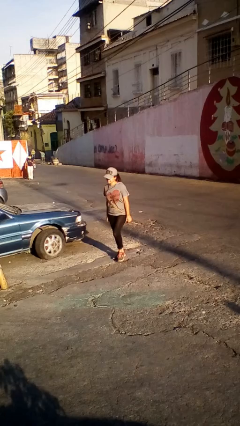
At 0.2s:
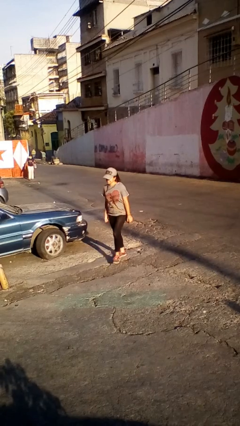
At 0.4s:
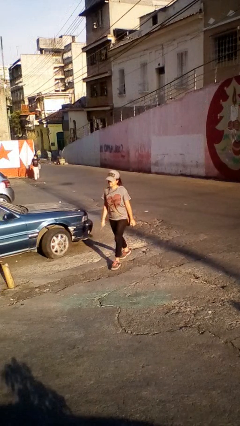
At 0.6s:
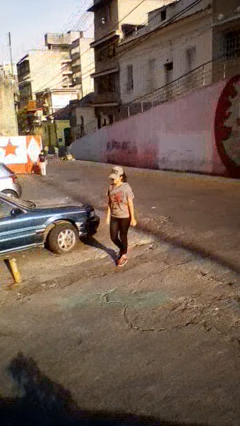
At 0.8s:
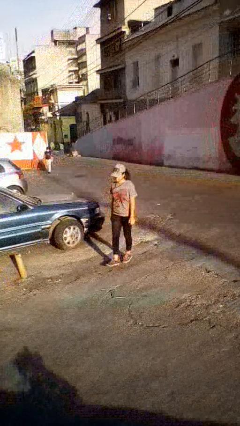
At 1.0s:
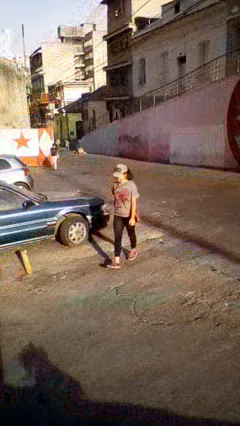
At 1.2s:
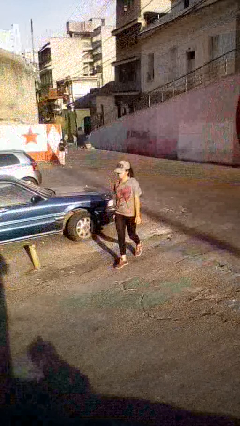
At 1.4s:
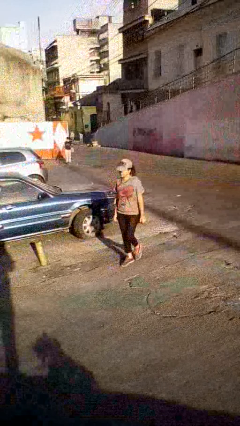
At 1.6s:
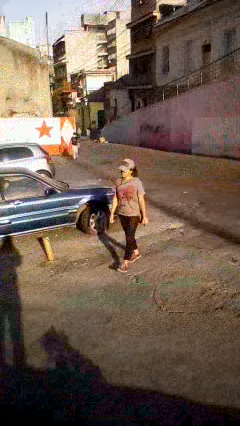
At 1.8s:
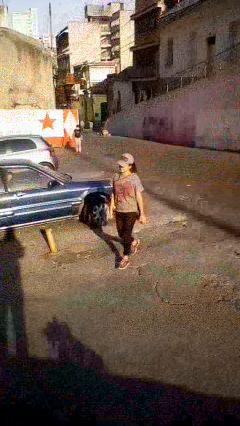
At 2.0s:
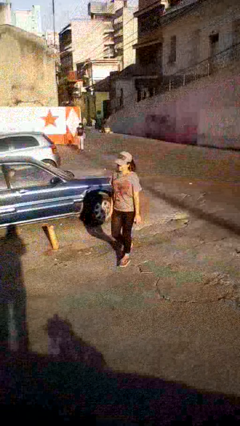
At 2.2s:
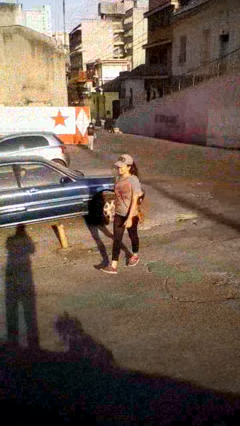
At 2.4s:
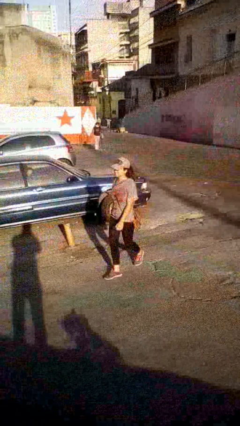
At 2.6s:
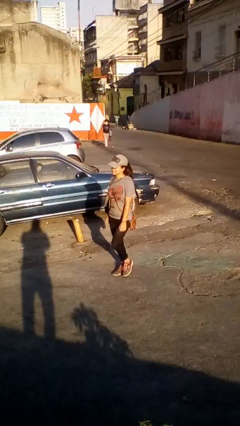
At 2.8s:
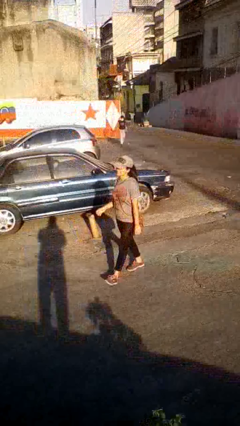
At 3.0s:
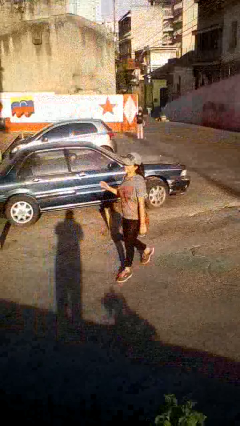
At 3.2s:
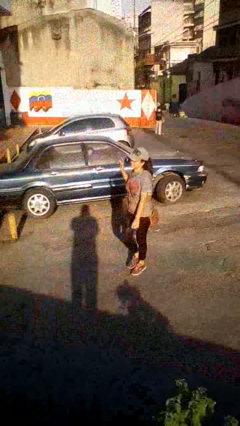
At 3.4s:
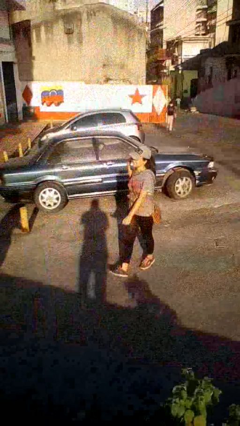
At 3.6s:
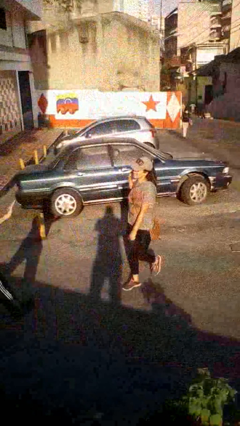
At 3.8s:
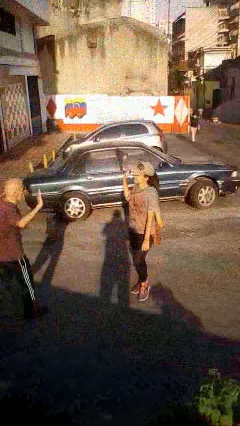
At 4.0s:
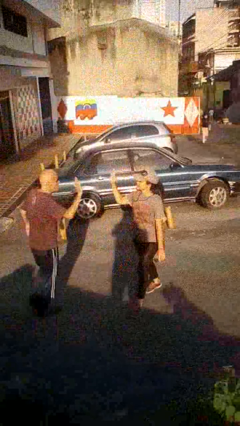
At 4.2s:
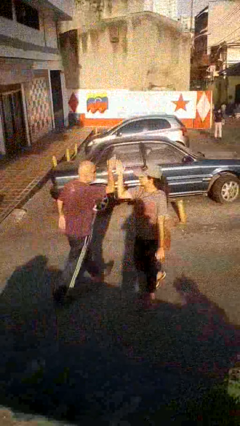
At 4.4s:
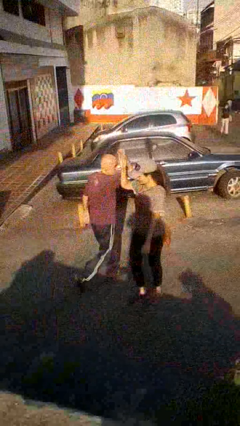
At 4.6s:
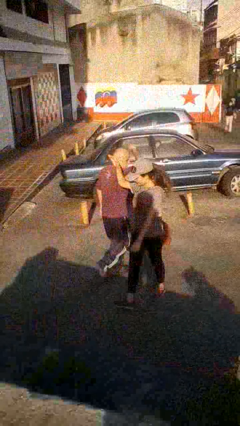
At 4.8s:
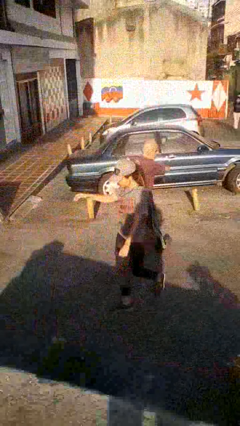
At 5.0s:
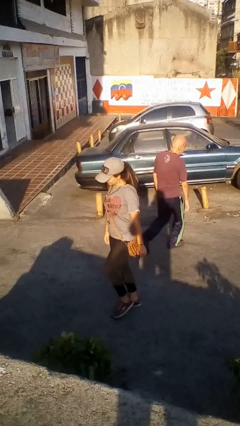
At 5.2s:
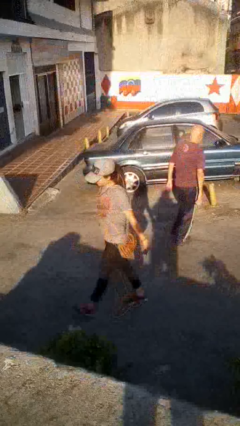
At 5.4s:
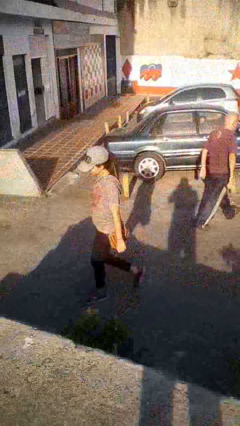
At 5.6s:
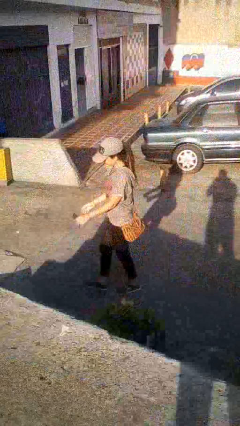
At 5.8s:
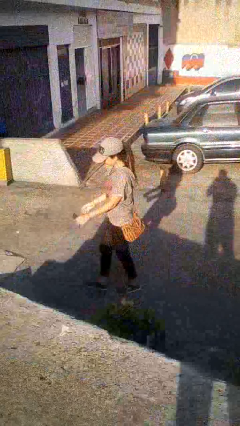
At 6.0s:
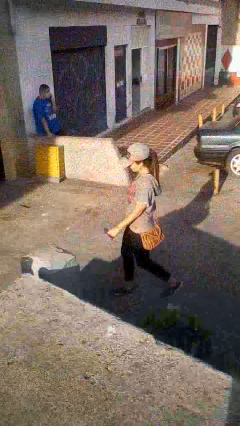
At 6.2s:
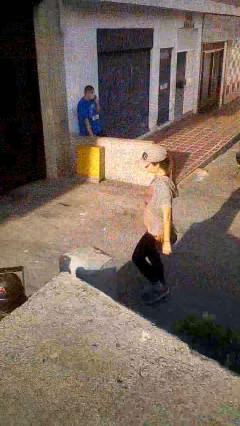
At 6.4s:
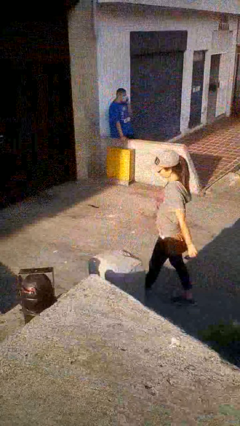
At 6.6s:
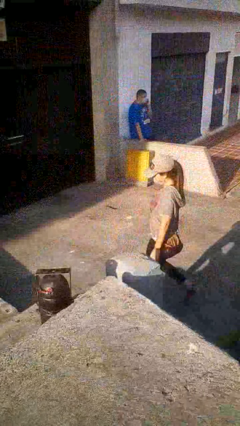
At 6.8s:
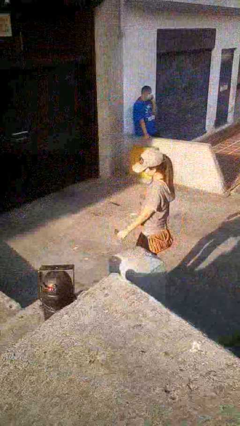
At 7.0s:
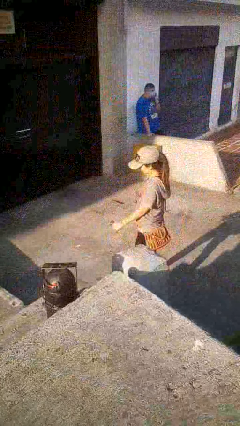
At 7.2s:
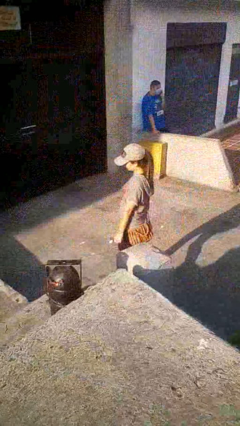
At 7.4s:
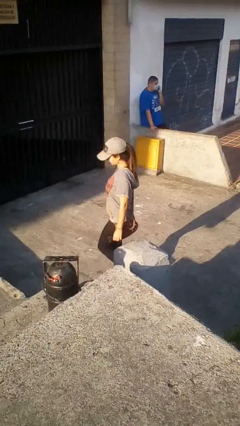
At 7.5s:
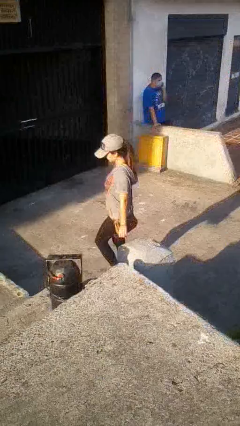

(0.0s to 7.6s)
person highfives hand

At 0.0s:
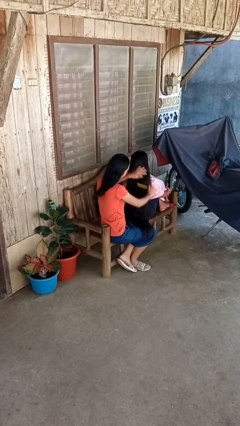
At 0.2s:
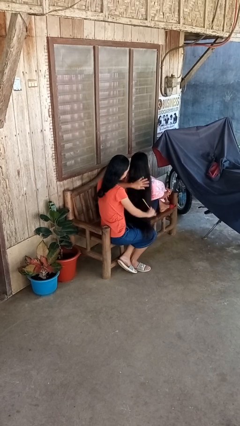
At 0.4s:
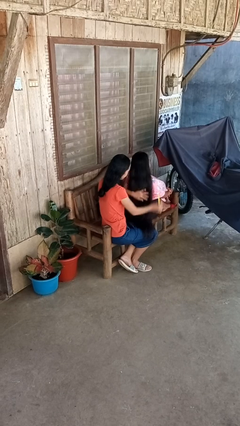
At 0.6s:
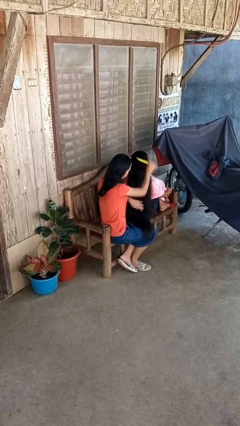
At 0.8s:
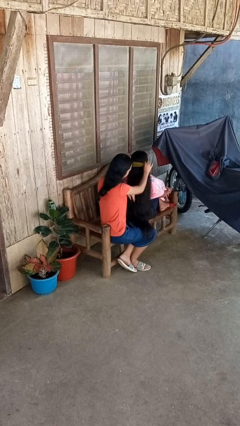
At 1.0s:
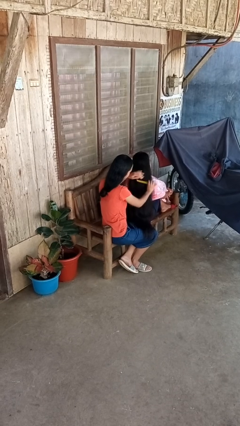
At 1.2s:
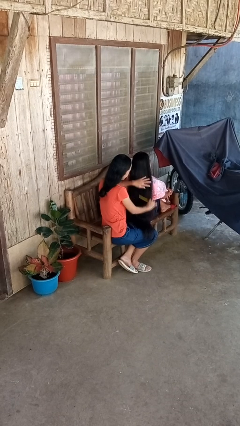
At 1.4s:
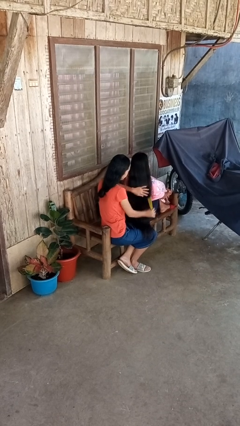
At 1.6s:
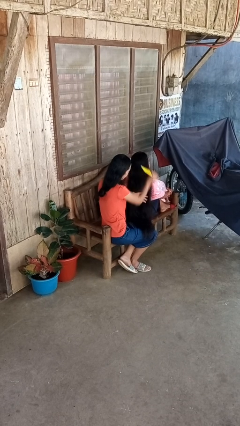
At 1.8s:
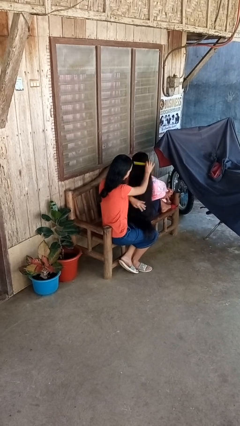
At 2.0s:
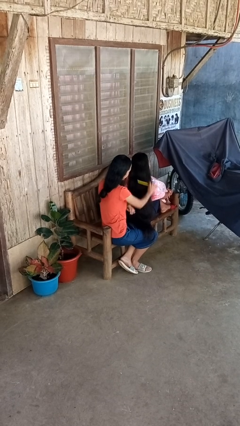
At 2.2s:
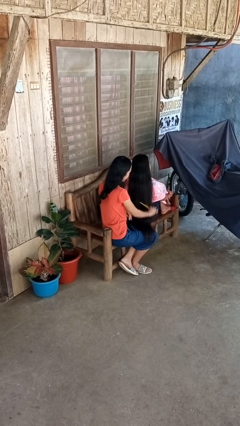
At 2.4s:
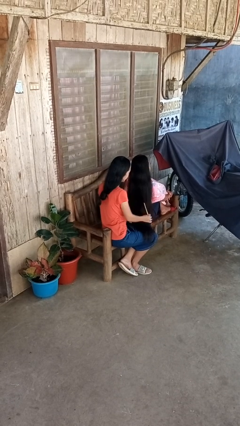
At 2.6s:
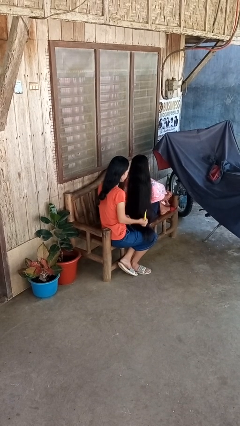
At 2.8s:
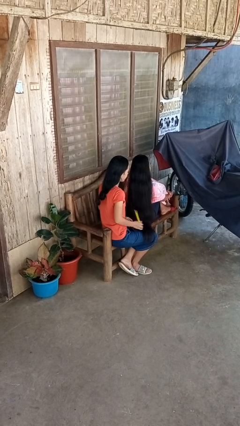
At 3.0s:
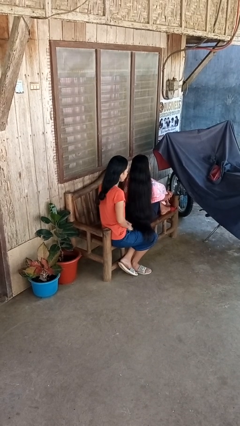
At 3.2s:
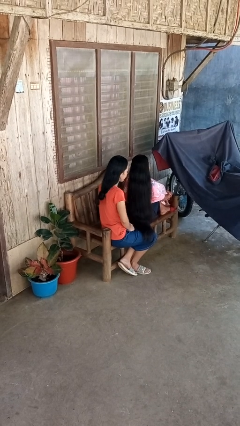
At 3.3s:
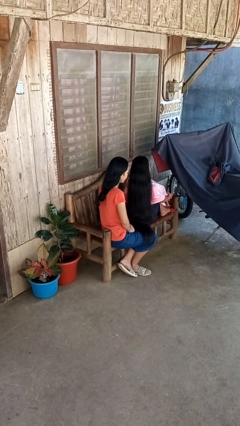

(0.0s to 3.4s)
person brushes hair of person

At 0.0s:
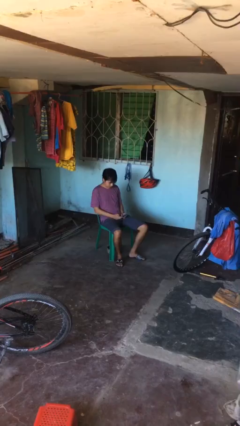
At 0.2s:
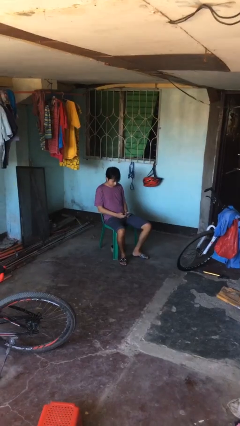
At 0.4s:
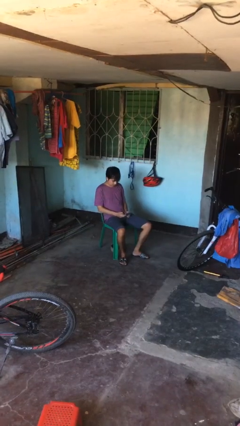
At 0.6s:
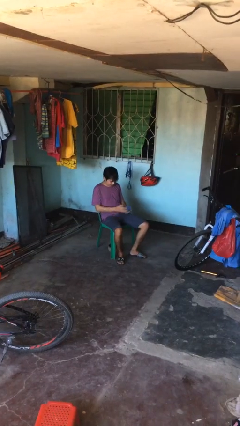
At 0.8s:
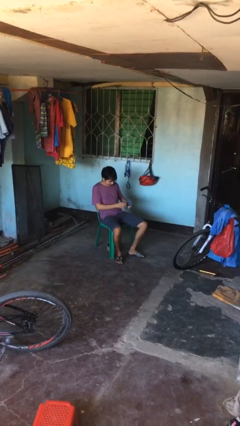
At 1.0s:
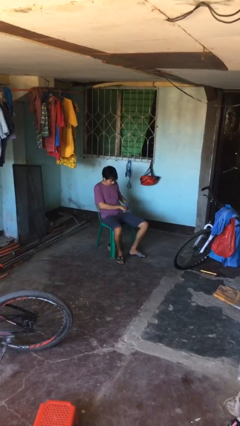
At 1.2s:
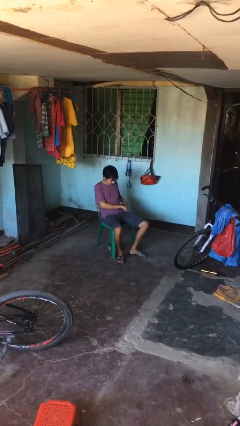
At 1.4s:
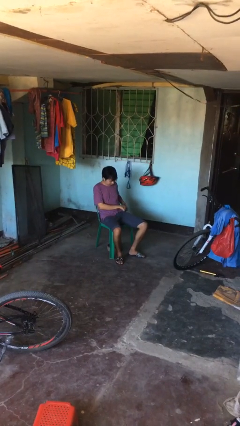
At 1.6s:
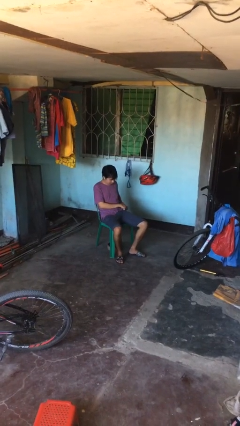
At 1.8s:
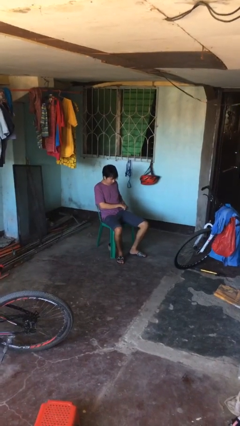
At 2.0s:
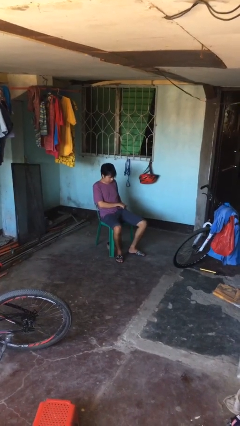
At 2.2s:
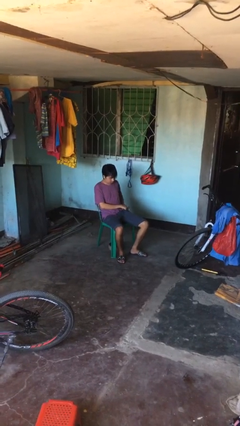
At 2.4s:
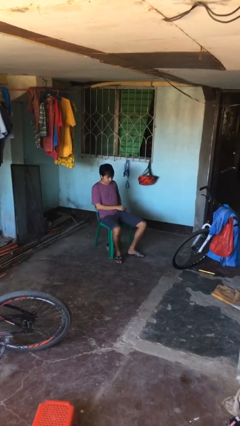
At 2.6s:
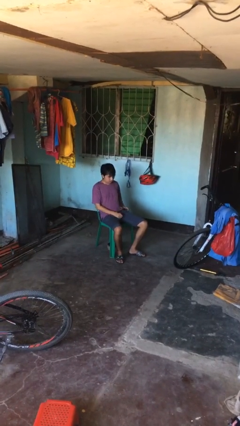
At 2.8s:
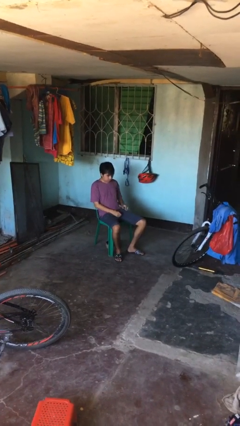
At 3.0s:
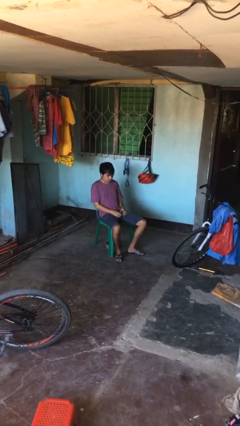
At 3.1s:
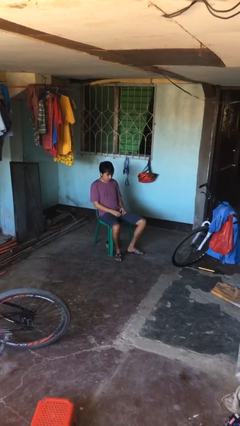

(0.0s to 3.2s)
person puts phone into pocket

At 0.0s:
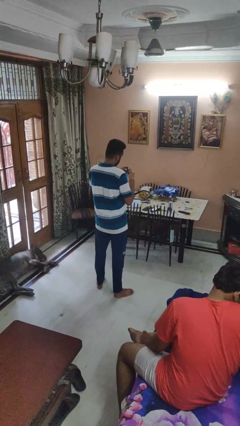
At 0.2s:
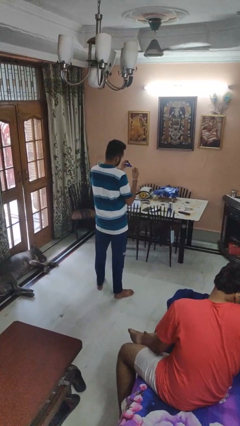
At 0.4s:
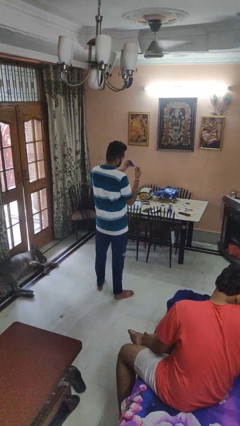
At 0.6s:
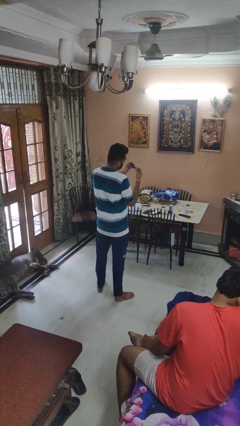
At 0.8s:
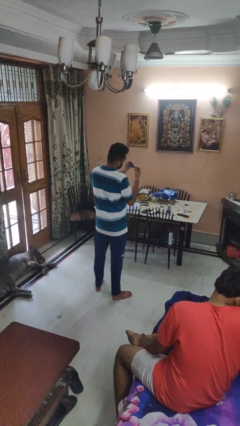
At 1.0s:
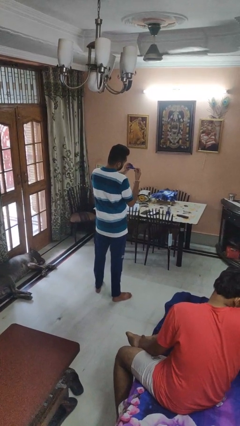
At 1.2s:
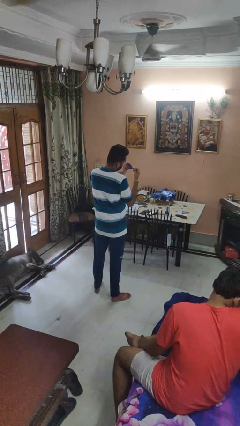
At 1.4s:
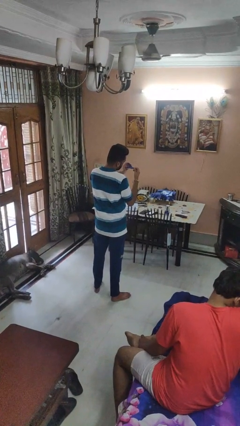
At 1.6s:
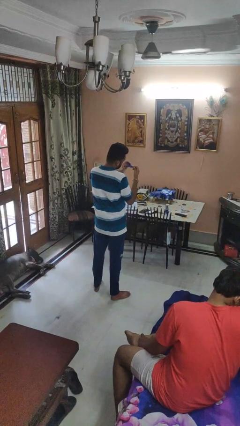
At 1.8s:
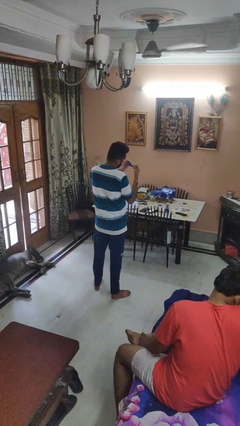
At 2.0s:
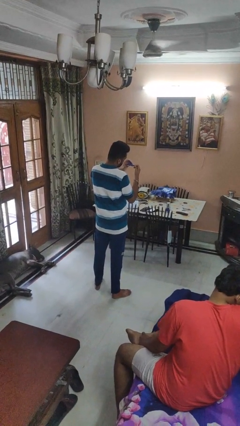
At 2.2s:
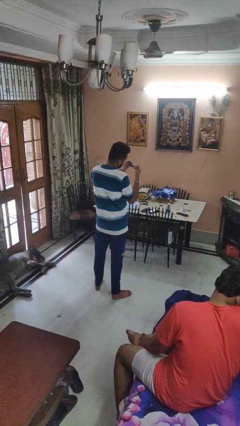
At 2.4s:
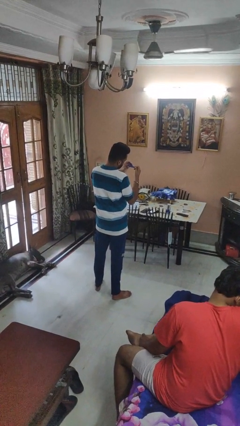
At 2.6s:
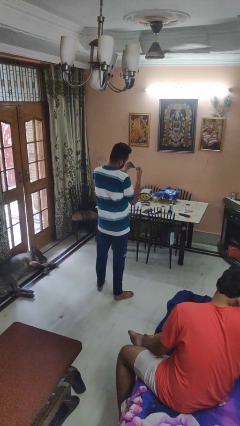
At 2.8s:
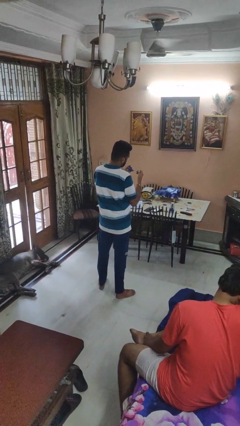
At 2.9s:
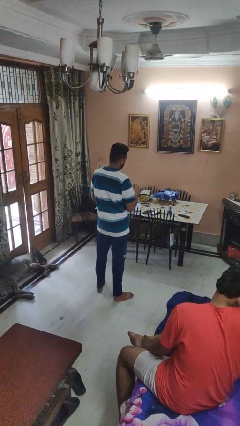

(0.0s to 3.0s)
person clips fingernails

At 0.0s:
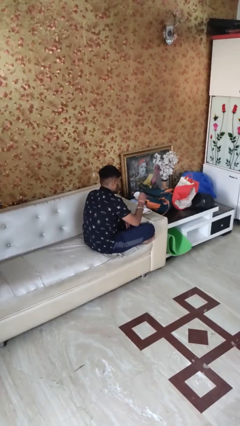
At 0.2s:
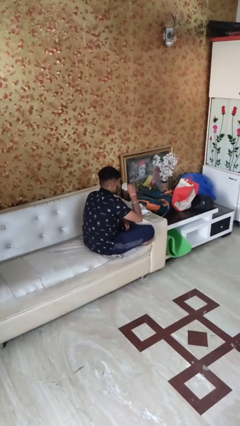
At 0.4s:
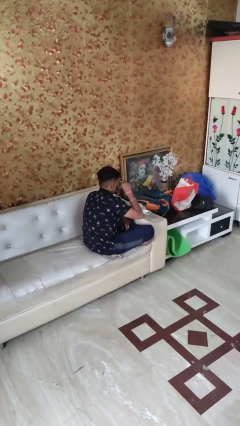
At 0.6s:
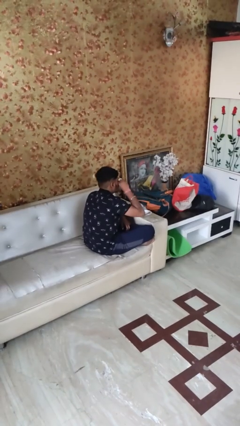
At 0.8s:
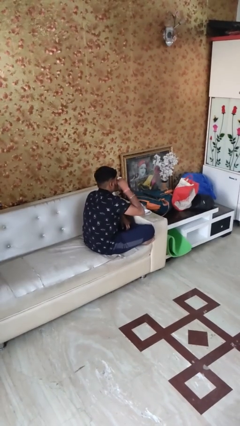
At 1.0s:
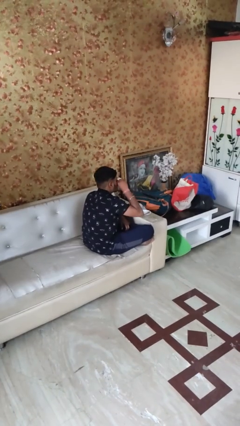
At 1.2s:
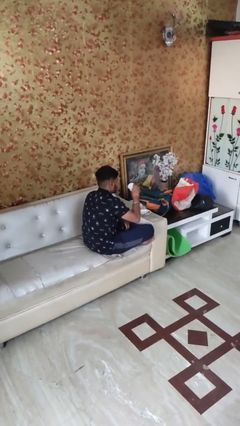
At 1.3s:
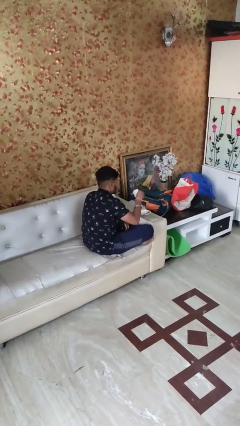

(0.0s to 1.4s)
person drinks from mug
